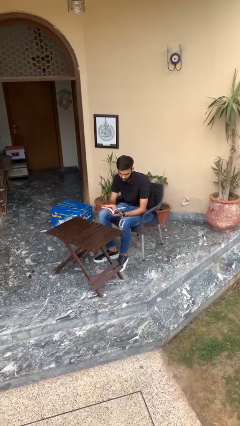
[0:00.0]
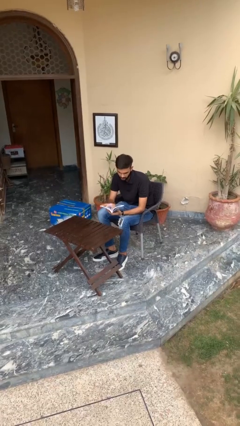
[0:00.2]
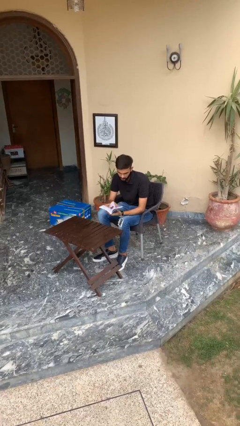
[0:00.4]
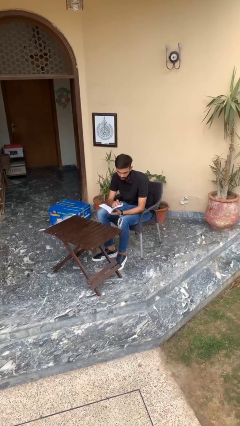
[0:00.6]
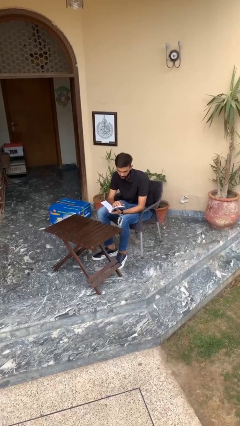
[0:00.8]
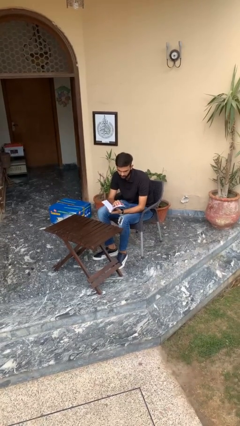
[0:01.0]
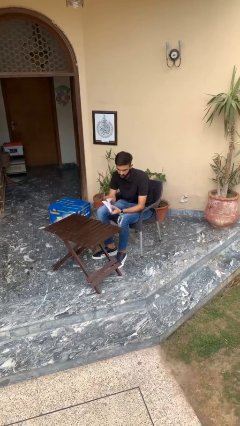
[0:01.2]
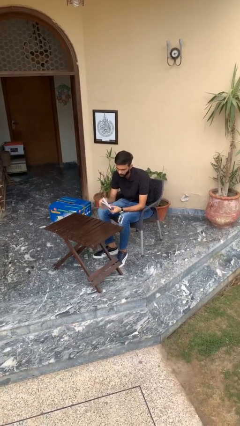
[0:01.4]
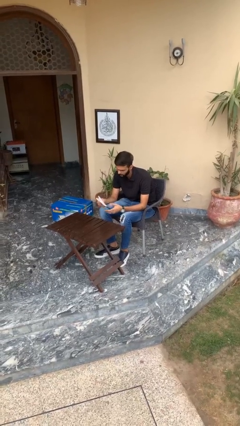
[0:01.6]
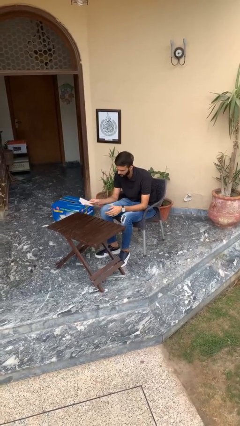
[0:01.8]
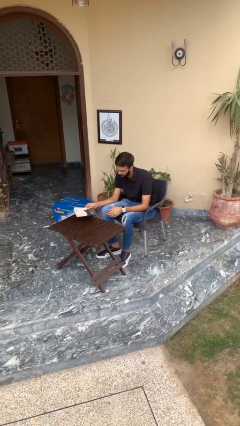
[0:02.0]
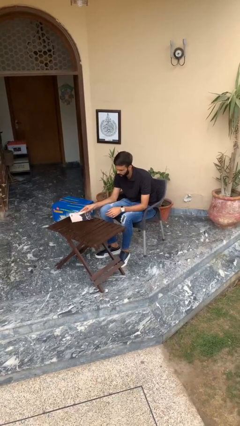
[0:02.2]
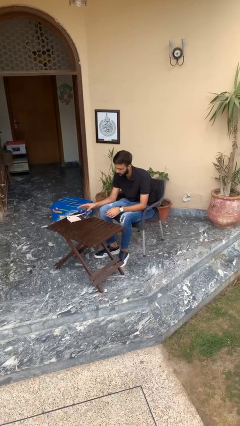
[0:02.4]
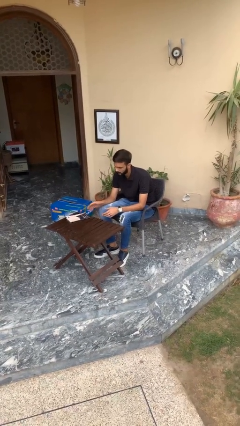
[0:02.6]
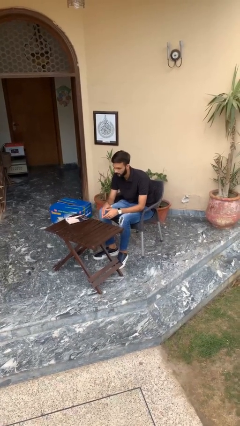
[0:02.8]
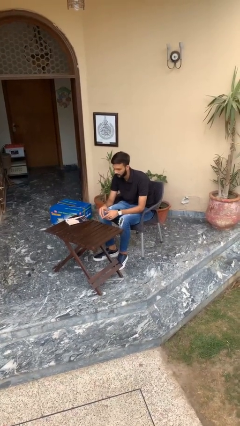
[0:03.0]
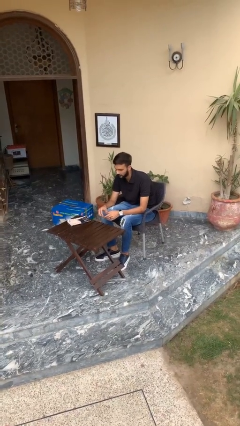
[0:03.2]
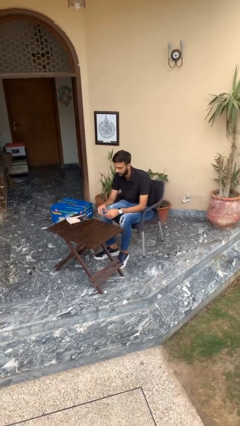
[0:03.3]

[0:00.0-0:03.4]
person puts down object on table

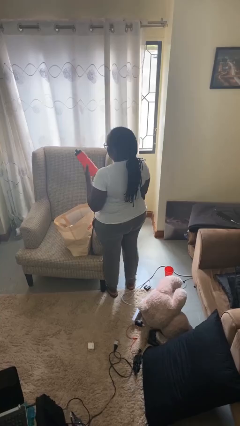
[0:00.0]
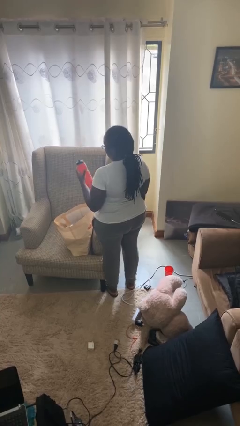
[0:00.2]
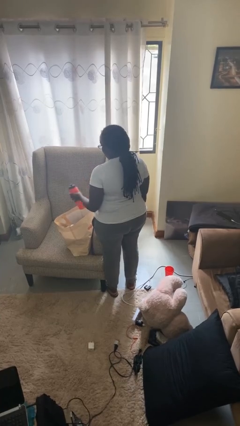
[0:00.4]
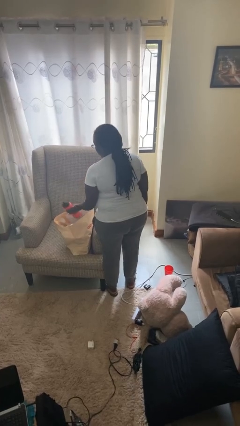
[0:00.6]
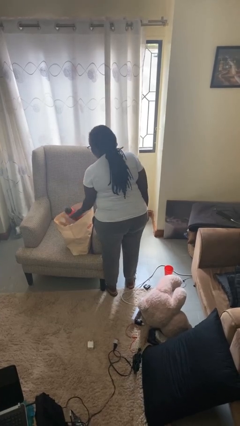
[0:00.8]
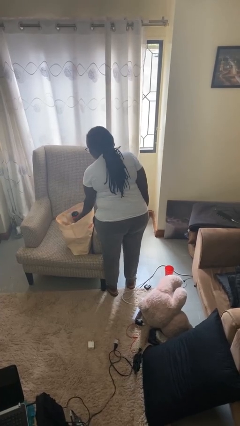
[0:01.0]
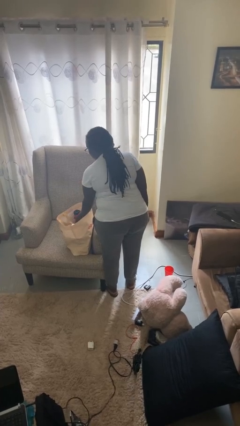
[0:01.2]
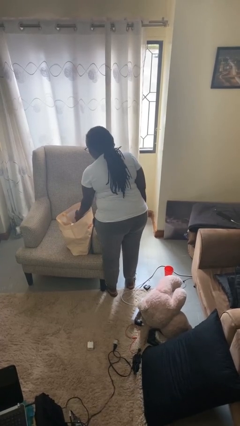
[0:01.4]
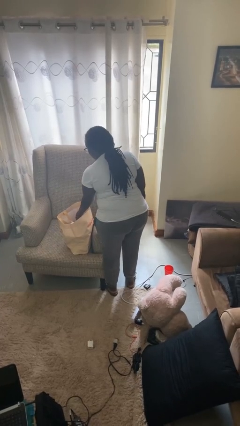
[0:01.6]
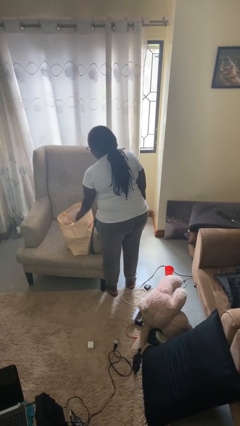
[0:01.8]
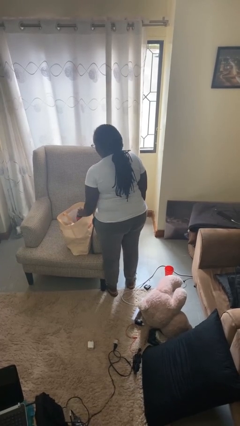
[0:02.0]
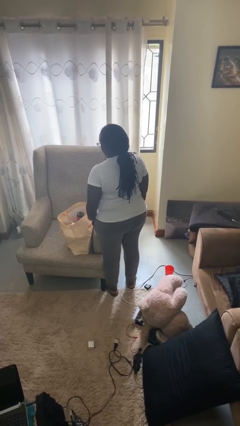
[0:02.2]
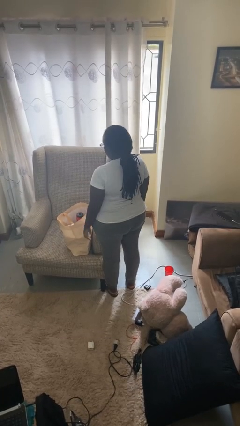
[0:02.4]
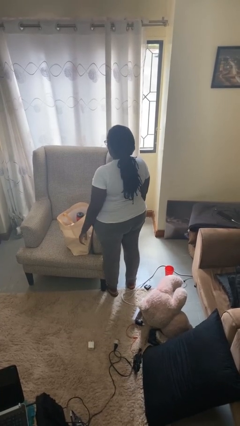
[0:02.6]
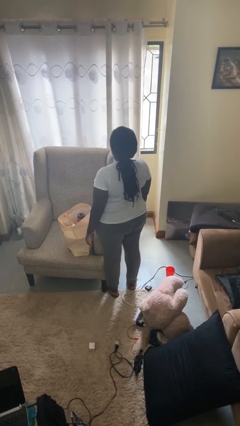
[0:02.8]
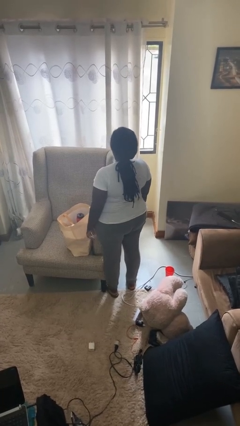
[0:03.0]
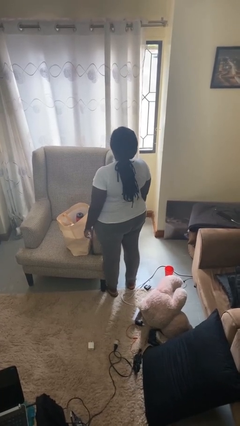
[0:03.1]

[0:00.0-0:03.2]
person puts object into bag

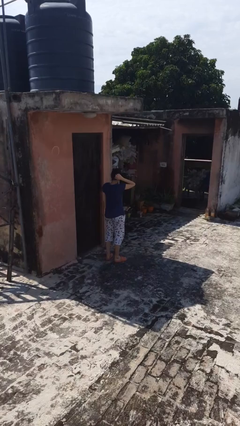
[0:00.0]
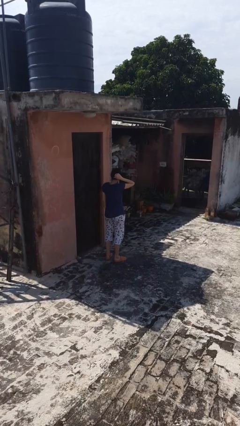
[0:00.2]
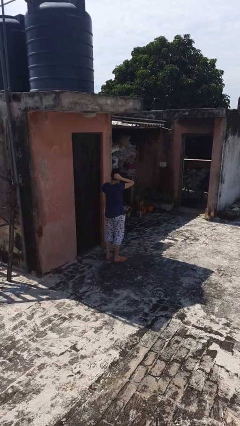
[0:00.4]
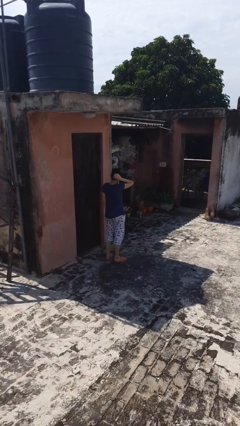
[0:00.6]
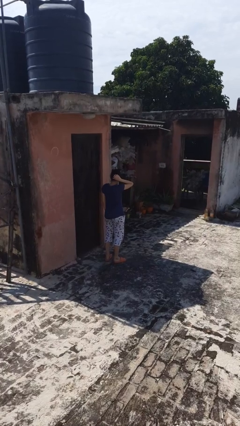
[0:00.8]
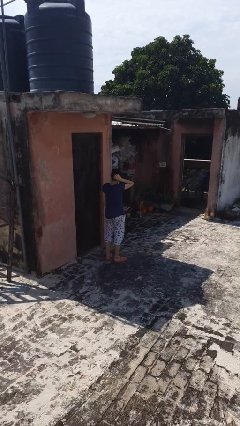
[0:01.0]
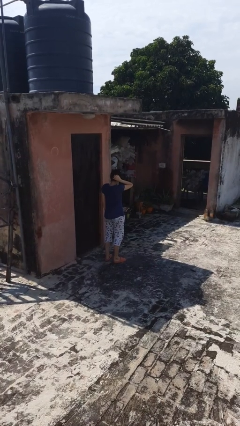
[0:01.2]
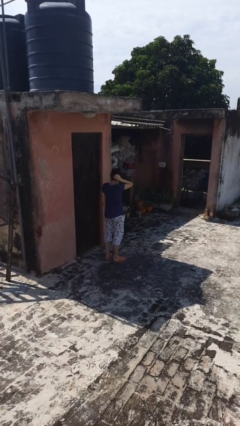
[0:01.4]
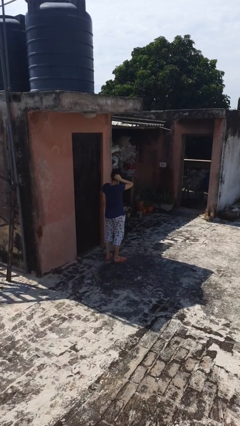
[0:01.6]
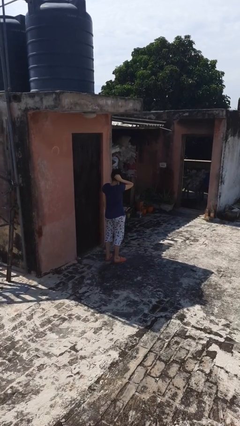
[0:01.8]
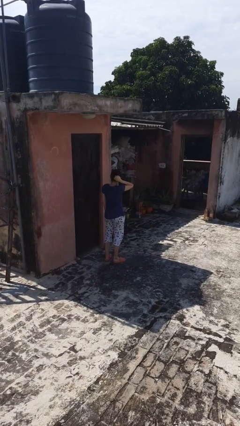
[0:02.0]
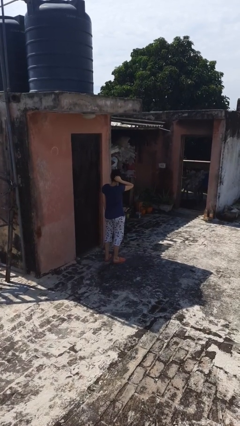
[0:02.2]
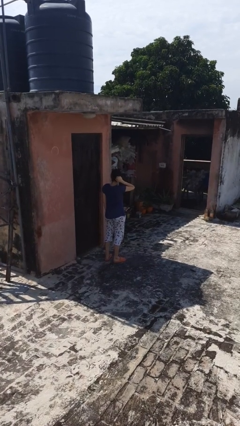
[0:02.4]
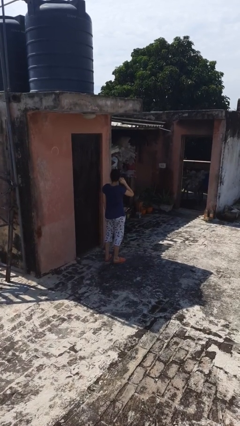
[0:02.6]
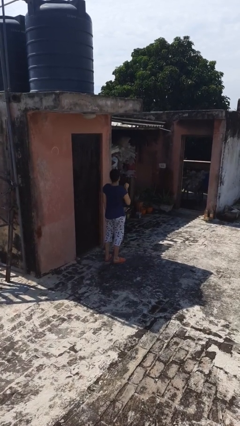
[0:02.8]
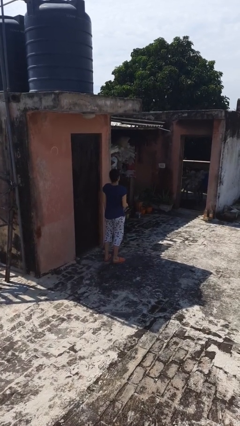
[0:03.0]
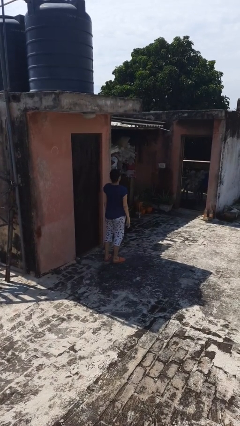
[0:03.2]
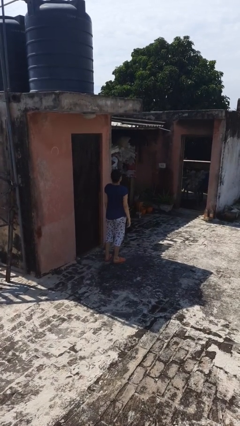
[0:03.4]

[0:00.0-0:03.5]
person scratches face

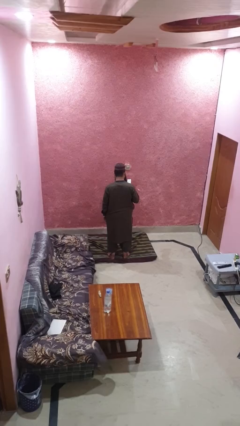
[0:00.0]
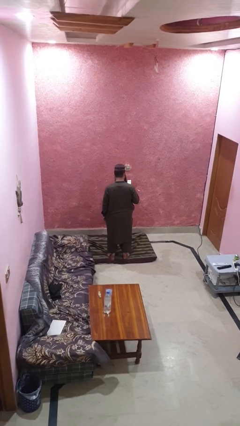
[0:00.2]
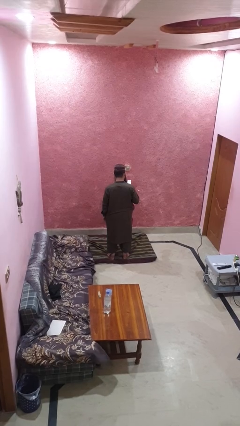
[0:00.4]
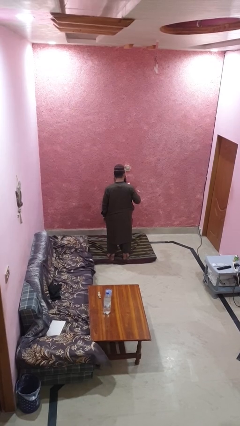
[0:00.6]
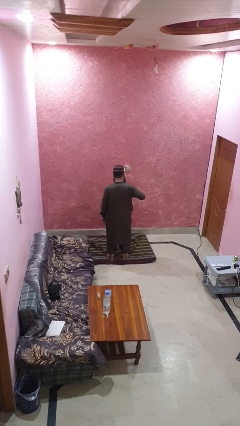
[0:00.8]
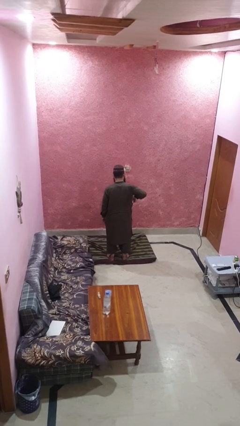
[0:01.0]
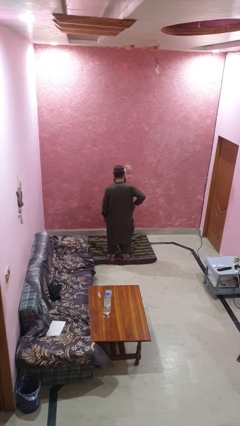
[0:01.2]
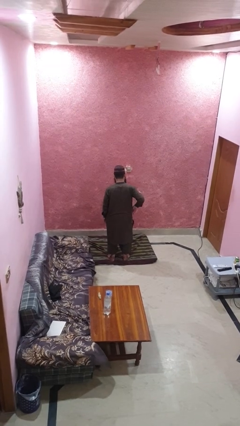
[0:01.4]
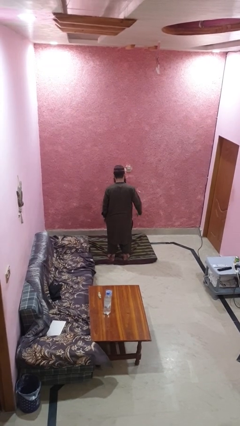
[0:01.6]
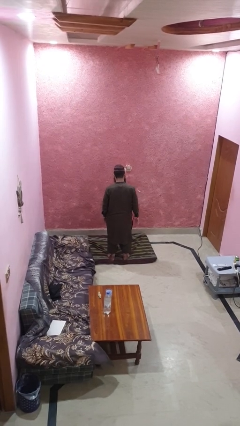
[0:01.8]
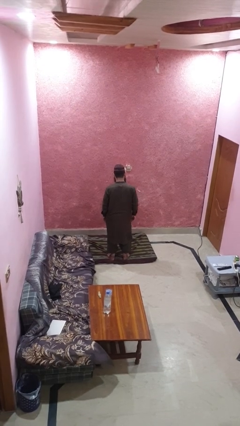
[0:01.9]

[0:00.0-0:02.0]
person puts phone into pocket

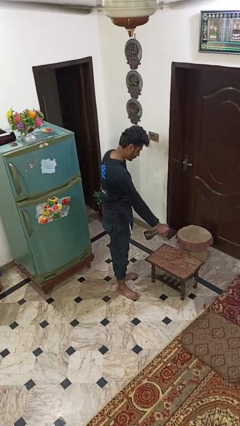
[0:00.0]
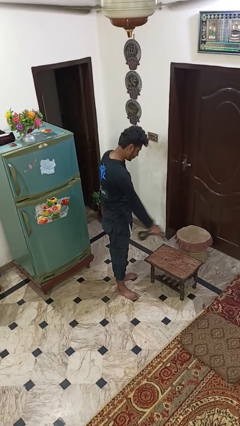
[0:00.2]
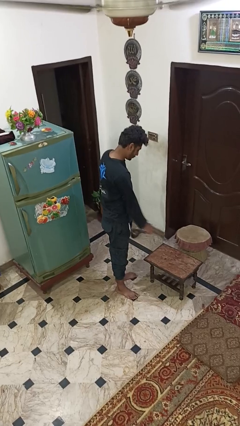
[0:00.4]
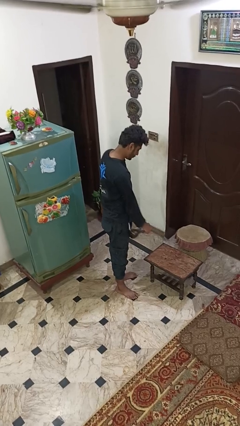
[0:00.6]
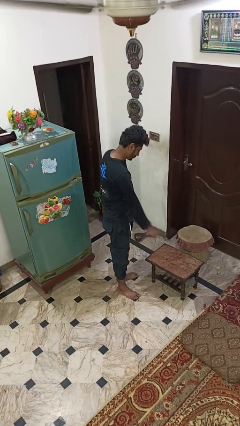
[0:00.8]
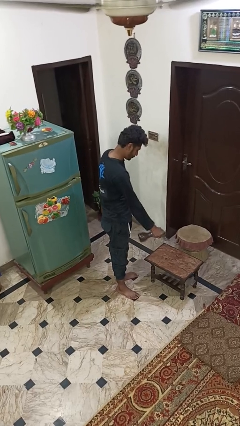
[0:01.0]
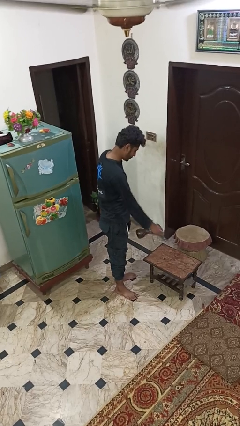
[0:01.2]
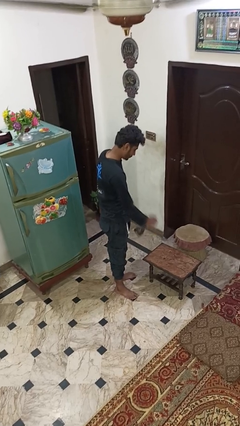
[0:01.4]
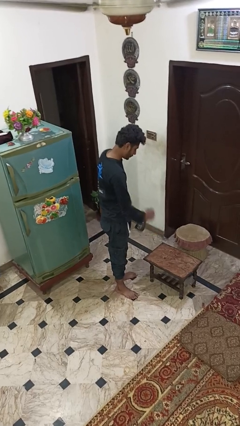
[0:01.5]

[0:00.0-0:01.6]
person sprays from bottle

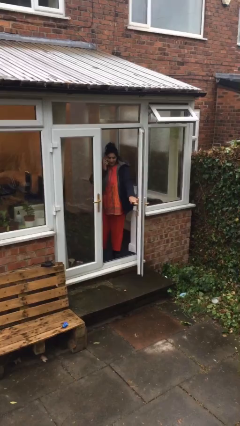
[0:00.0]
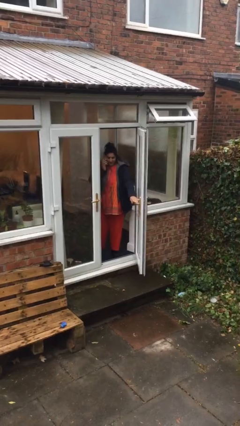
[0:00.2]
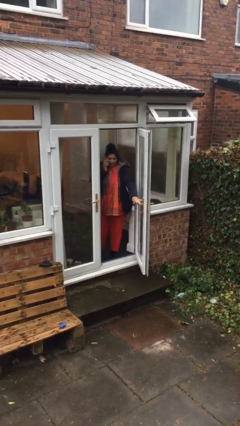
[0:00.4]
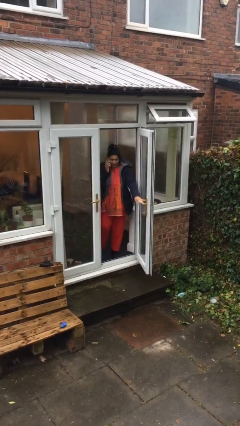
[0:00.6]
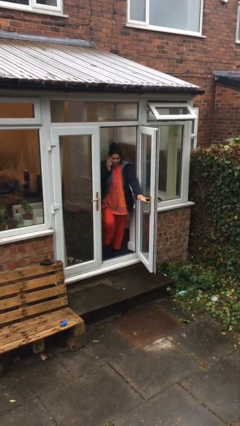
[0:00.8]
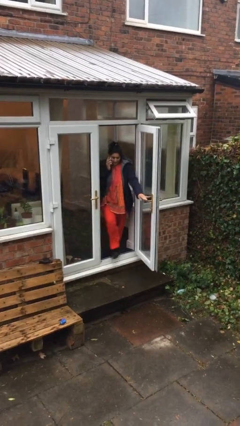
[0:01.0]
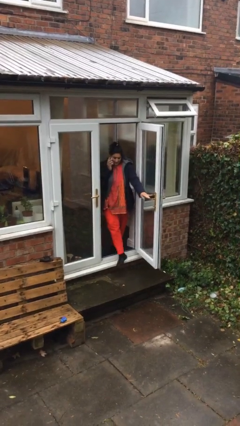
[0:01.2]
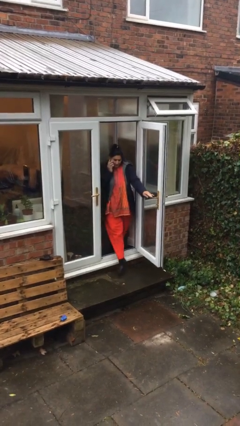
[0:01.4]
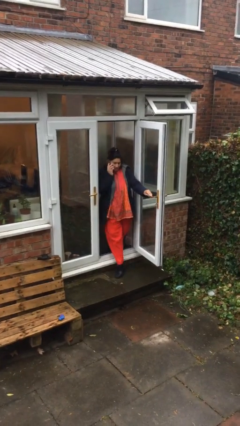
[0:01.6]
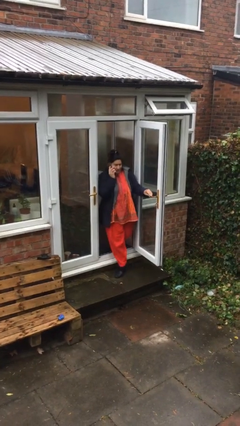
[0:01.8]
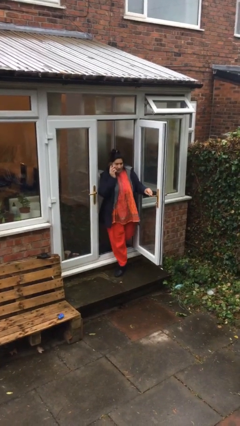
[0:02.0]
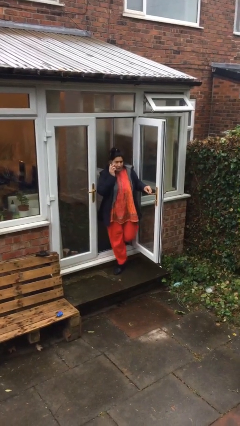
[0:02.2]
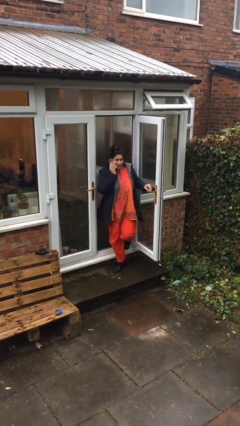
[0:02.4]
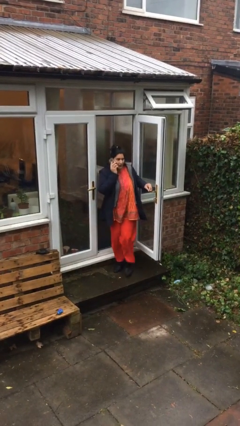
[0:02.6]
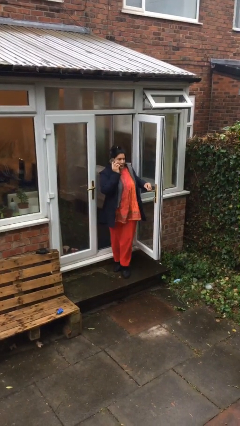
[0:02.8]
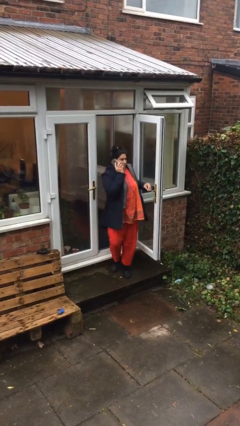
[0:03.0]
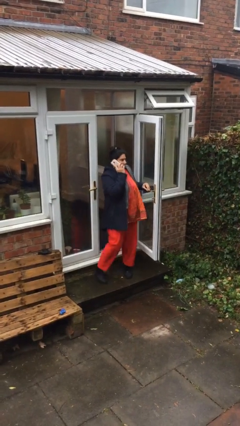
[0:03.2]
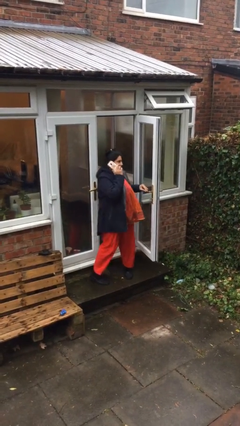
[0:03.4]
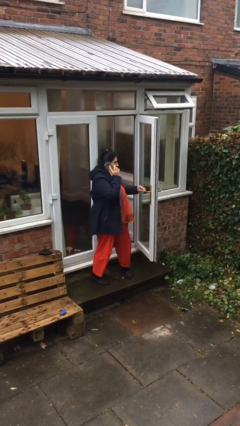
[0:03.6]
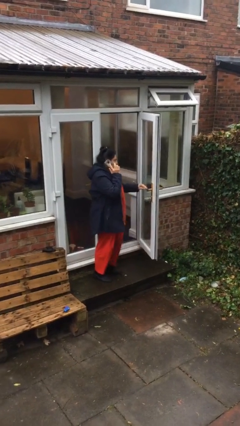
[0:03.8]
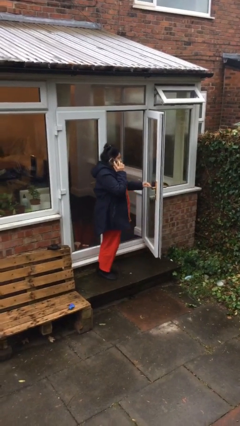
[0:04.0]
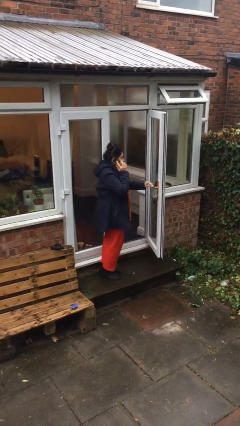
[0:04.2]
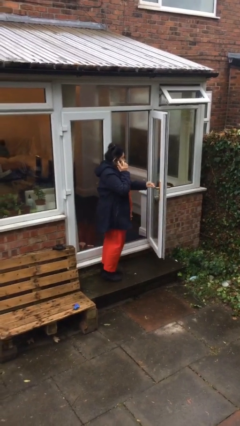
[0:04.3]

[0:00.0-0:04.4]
person enters scene through structure
